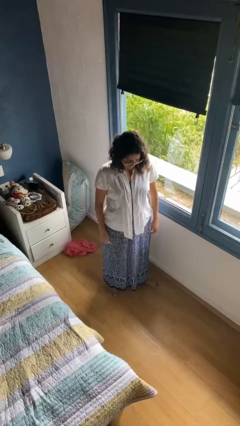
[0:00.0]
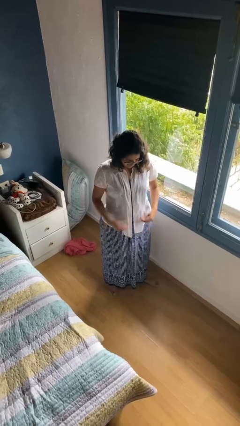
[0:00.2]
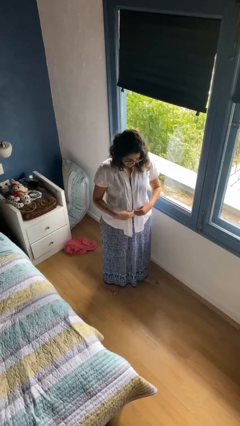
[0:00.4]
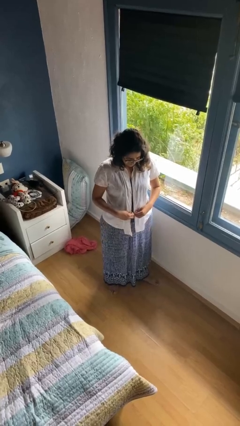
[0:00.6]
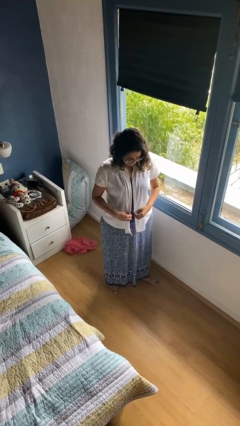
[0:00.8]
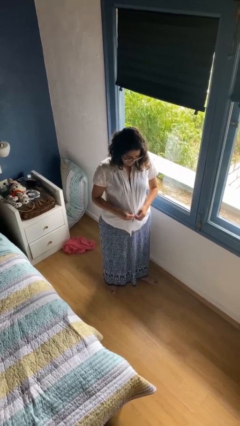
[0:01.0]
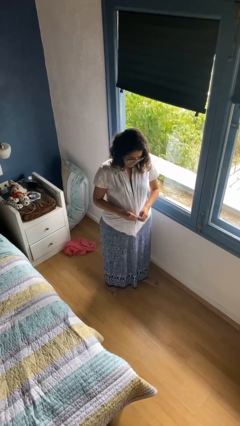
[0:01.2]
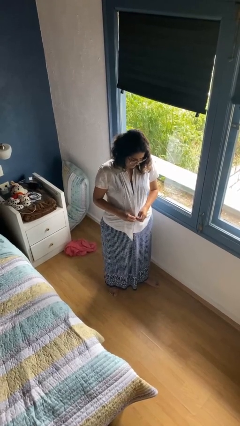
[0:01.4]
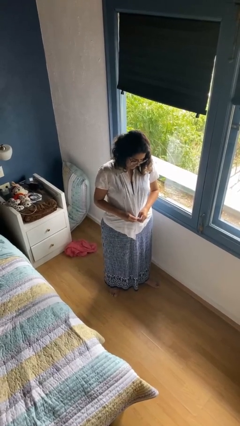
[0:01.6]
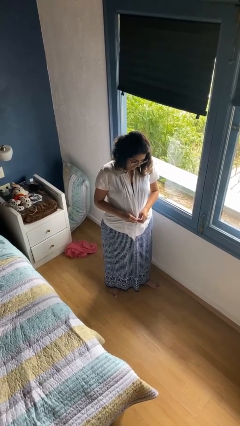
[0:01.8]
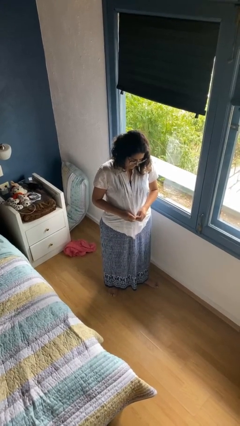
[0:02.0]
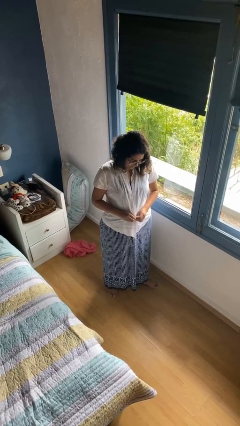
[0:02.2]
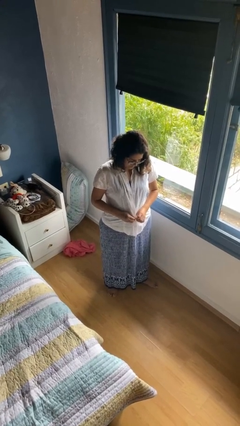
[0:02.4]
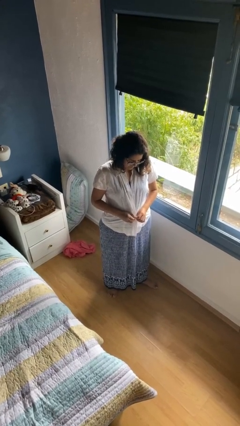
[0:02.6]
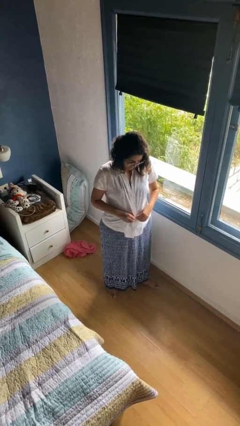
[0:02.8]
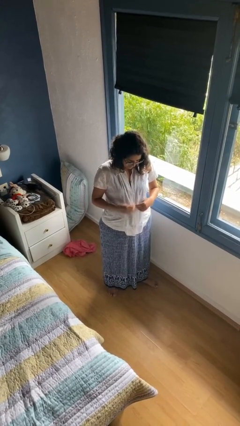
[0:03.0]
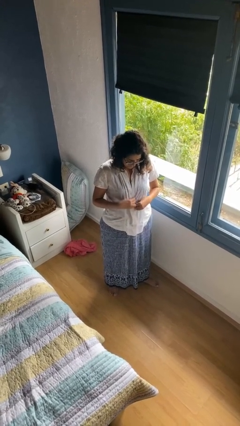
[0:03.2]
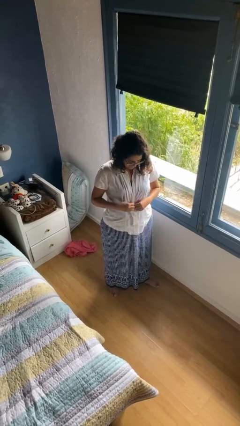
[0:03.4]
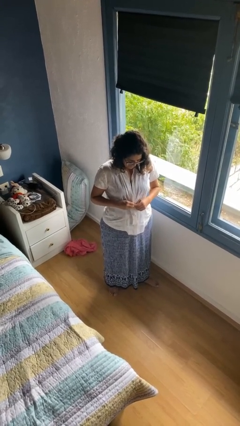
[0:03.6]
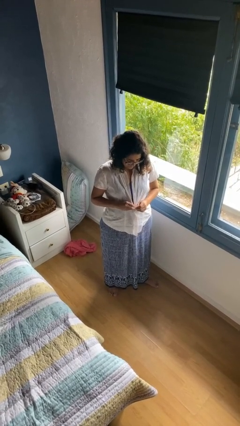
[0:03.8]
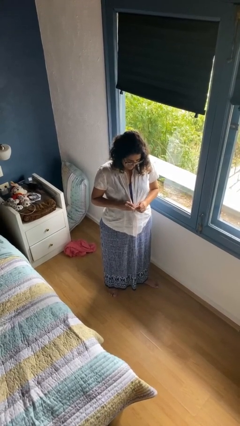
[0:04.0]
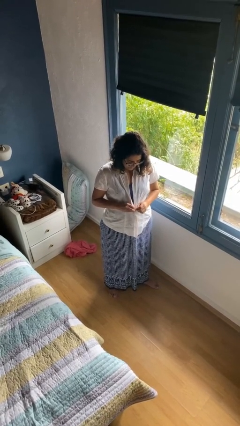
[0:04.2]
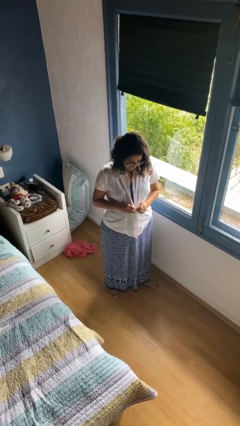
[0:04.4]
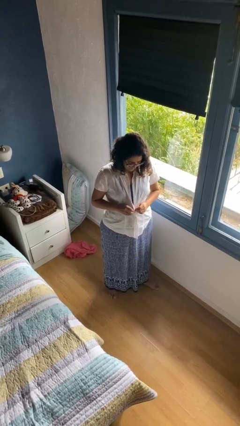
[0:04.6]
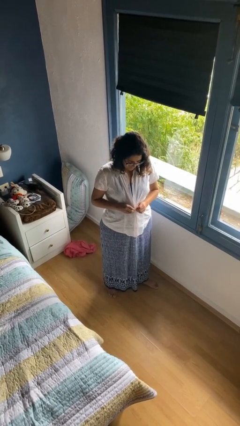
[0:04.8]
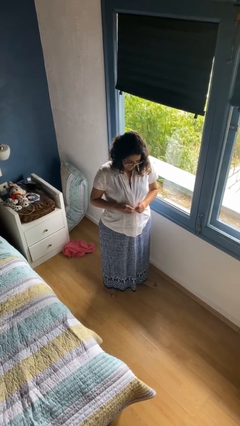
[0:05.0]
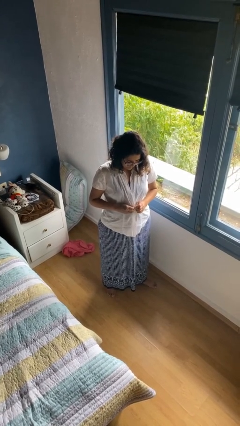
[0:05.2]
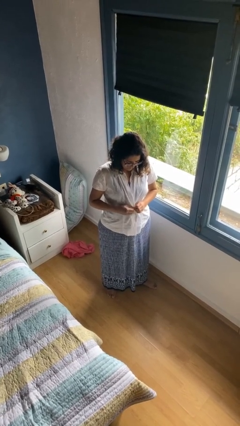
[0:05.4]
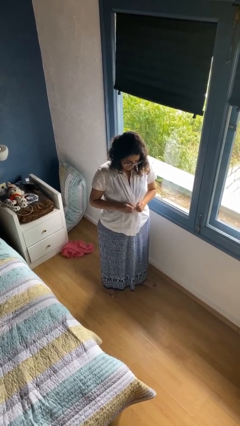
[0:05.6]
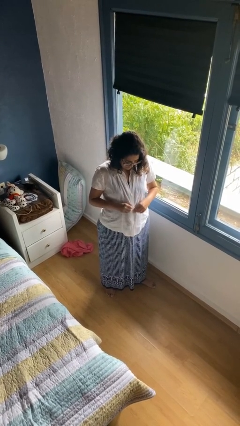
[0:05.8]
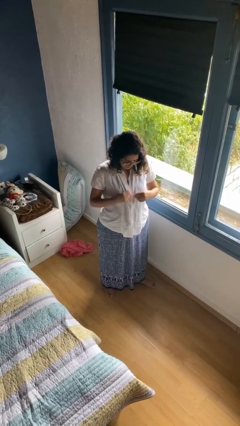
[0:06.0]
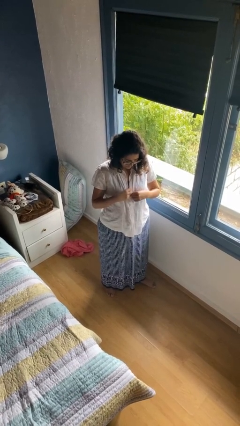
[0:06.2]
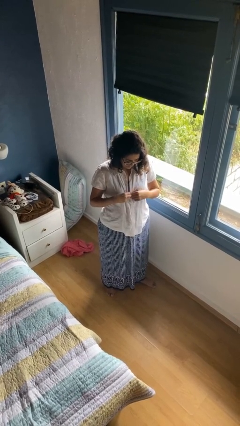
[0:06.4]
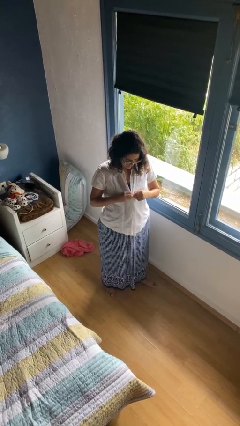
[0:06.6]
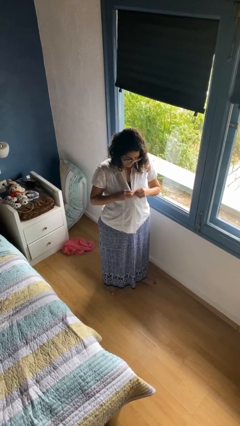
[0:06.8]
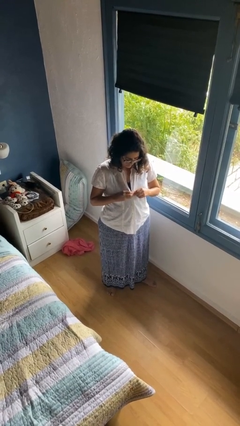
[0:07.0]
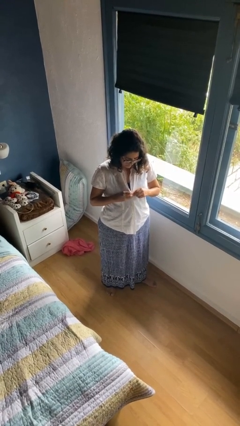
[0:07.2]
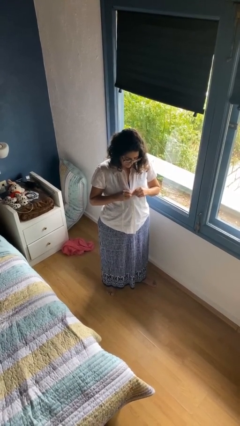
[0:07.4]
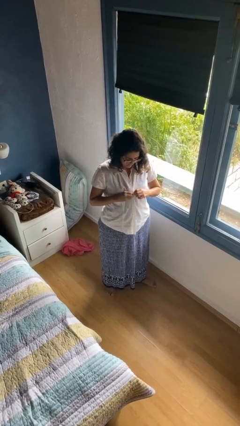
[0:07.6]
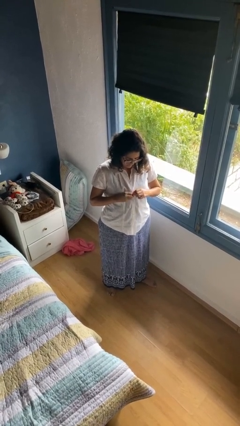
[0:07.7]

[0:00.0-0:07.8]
person buttons shirt

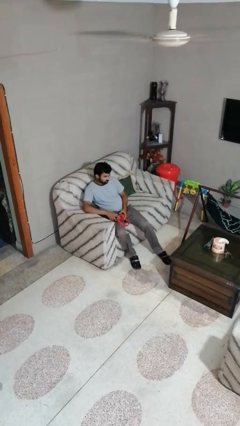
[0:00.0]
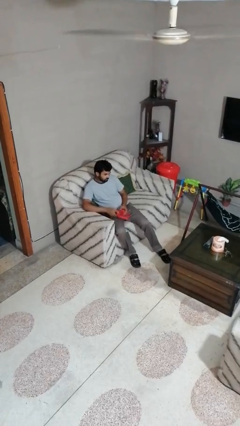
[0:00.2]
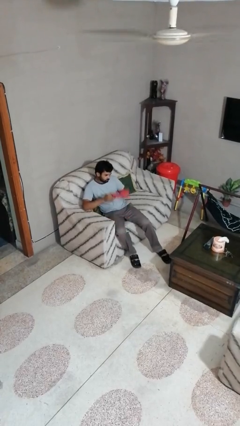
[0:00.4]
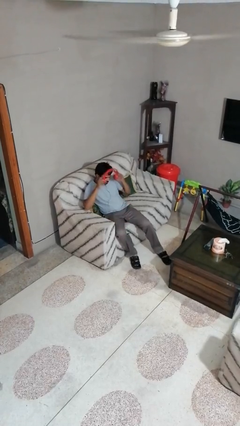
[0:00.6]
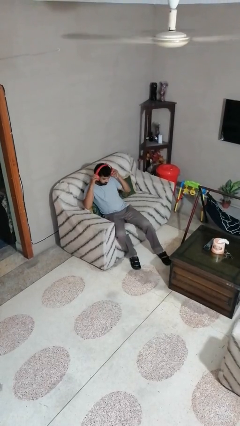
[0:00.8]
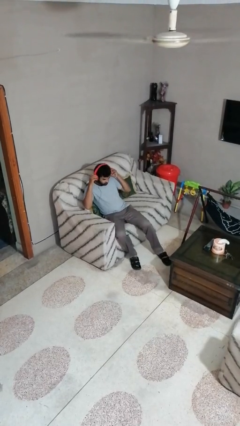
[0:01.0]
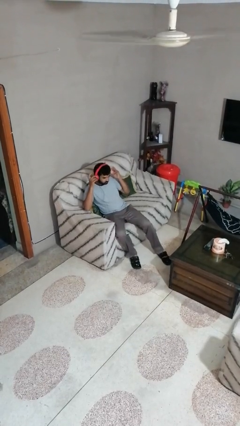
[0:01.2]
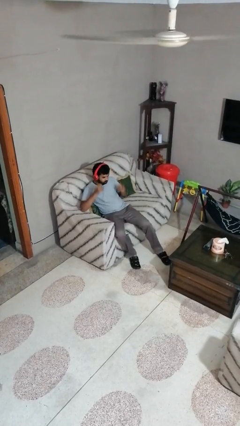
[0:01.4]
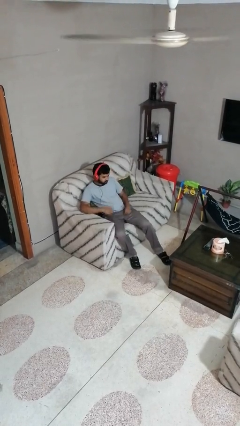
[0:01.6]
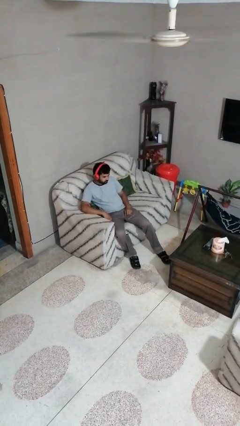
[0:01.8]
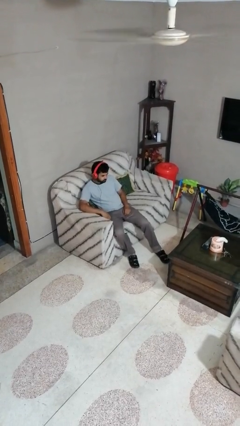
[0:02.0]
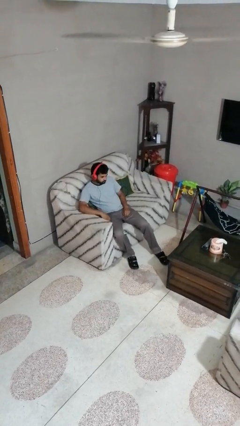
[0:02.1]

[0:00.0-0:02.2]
person puts on headphones

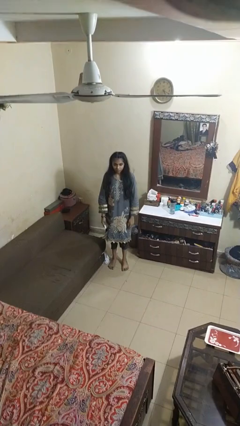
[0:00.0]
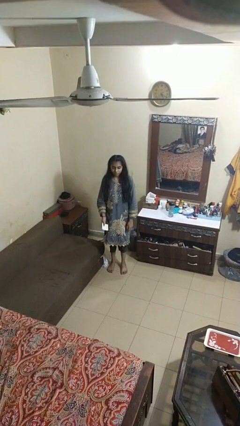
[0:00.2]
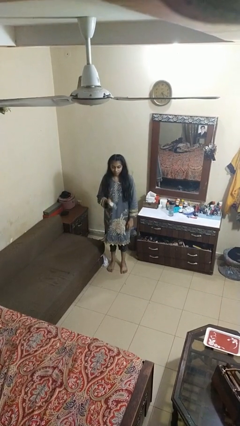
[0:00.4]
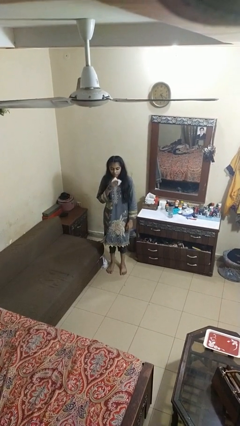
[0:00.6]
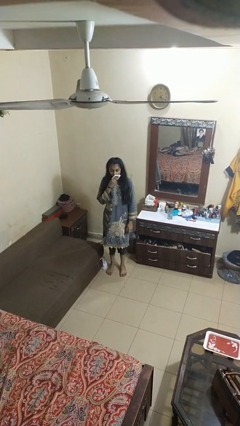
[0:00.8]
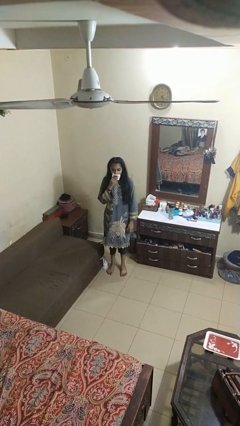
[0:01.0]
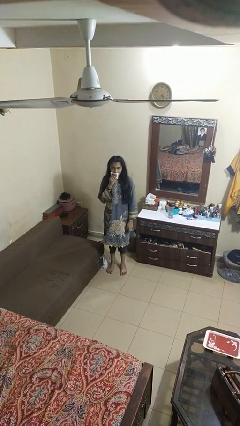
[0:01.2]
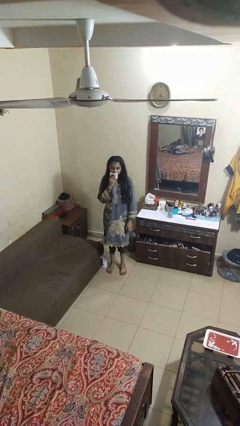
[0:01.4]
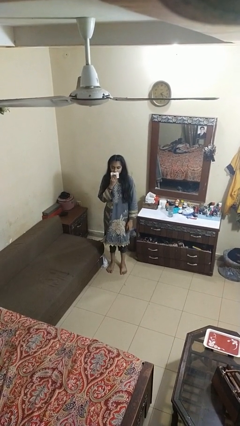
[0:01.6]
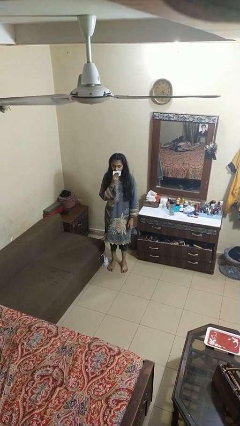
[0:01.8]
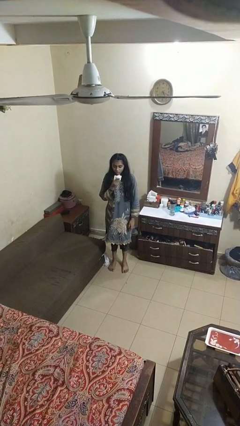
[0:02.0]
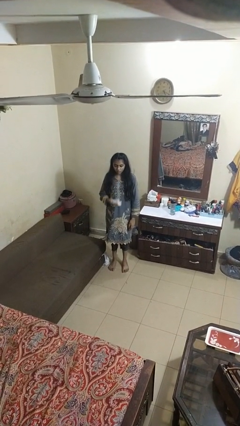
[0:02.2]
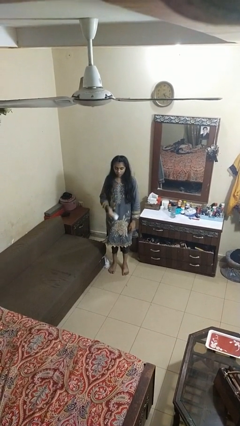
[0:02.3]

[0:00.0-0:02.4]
person wipes mouth with napkin

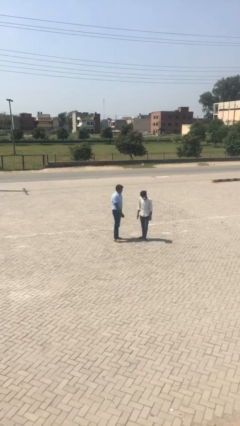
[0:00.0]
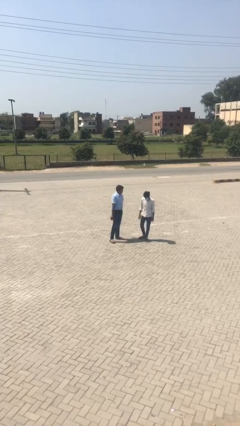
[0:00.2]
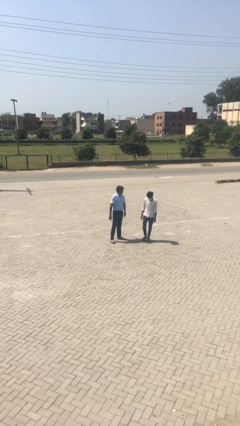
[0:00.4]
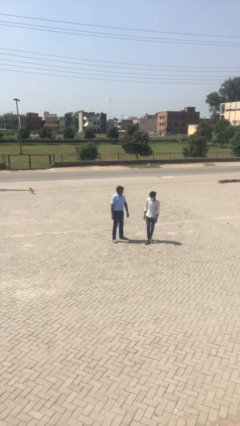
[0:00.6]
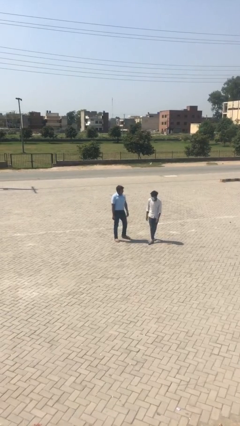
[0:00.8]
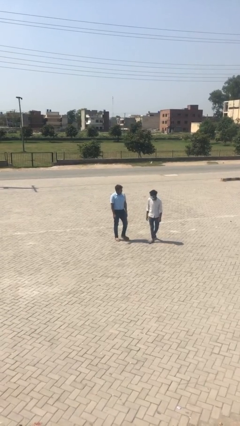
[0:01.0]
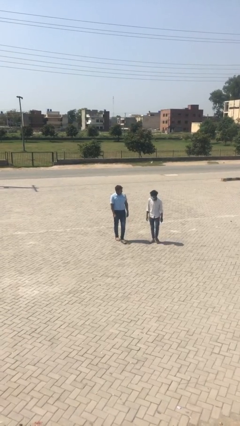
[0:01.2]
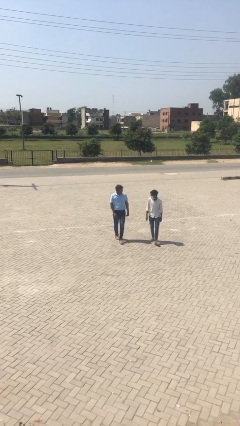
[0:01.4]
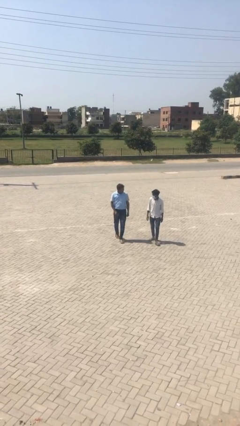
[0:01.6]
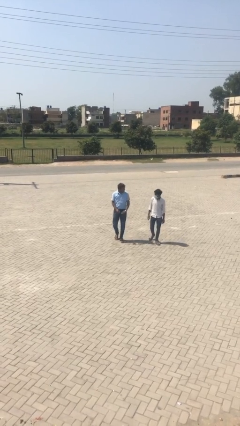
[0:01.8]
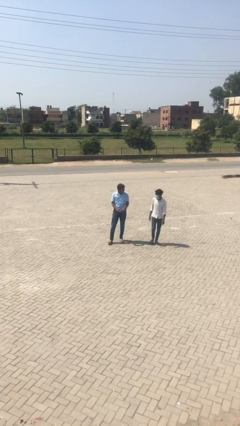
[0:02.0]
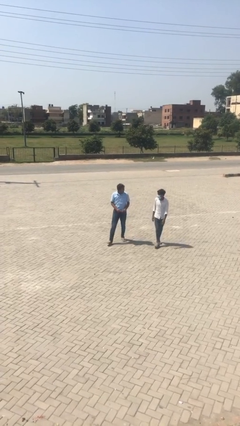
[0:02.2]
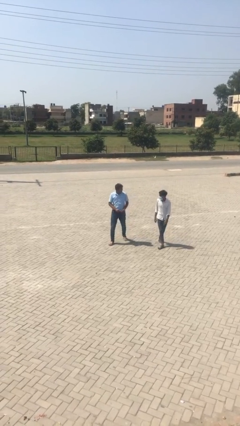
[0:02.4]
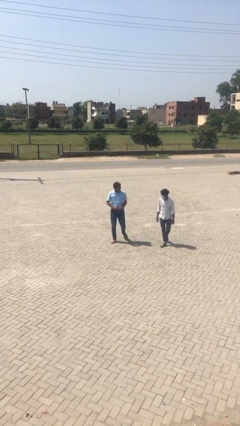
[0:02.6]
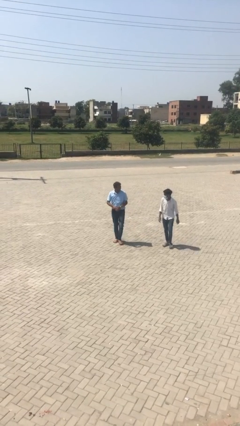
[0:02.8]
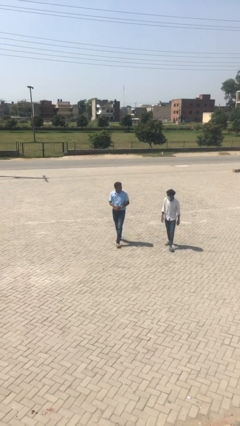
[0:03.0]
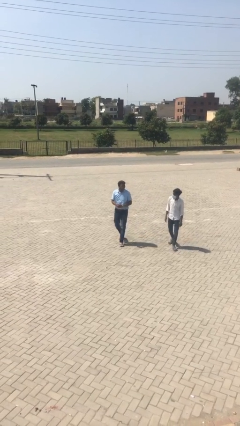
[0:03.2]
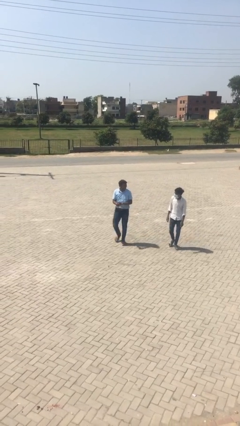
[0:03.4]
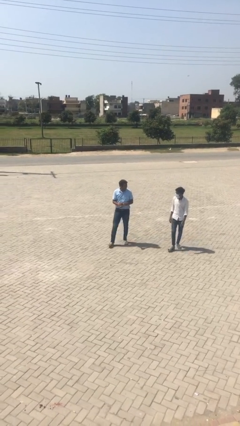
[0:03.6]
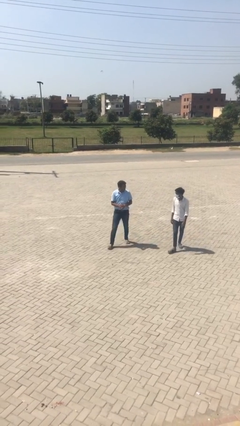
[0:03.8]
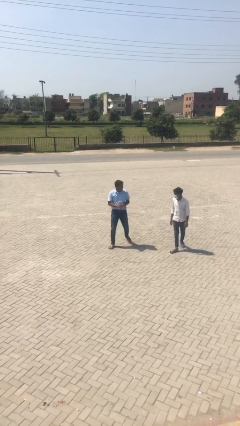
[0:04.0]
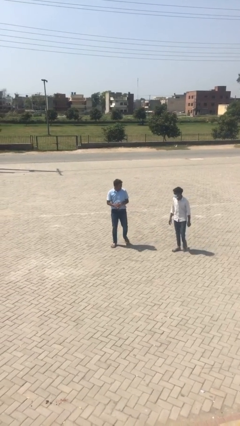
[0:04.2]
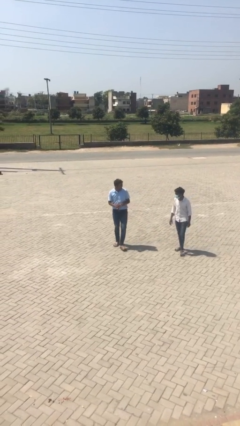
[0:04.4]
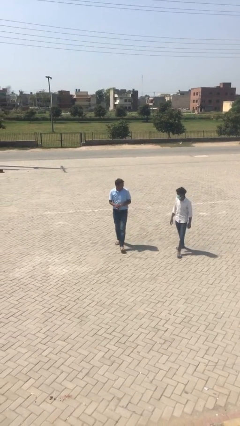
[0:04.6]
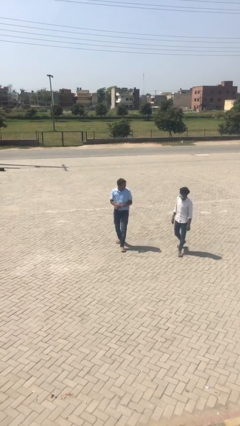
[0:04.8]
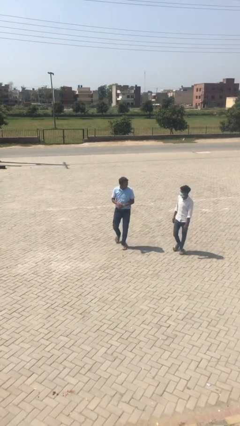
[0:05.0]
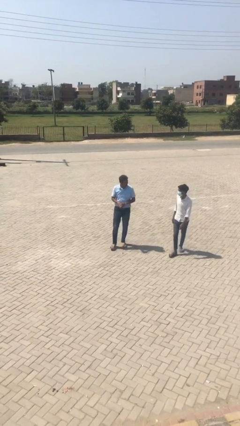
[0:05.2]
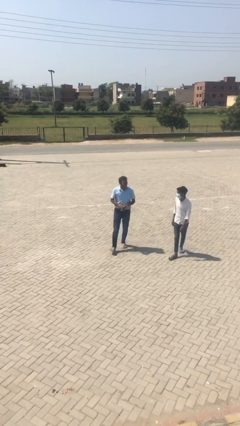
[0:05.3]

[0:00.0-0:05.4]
person talks to person
